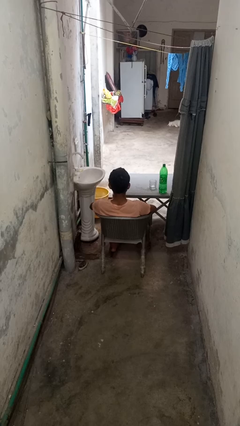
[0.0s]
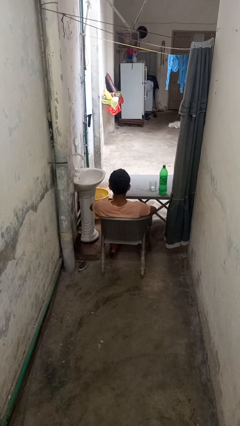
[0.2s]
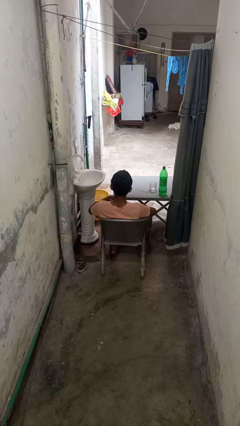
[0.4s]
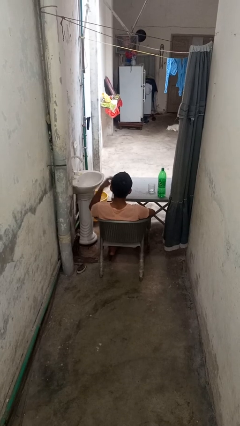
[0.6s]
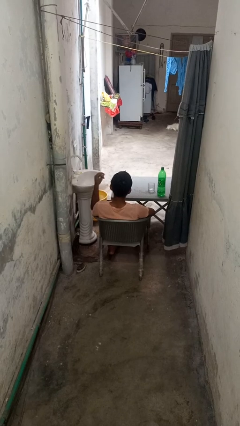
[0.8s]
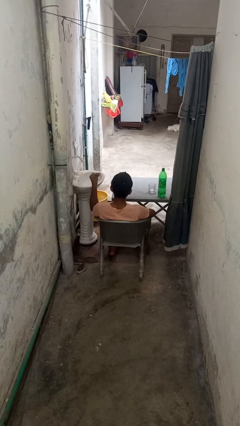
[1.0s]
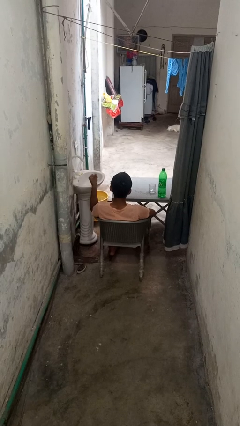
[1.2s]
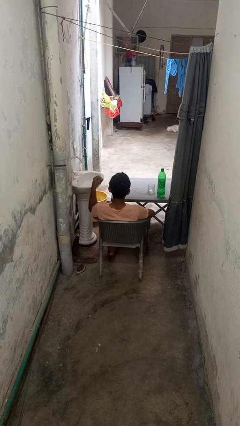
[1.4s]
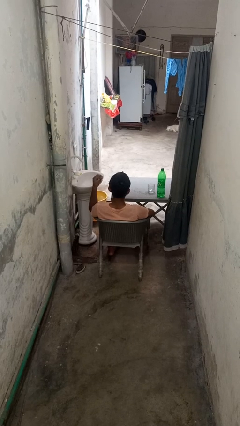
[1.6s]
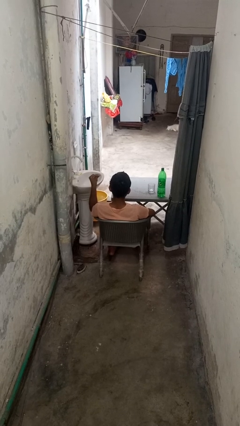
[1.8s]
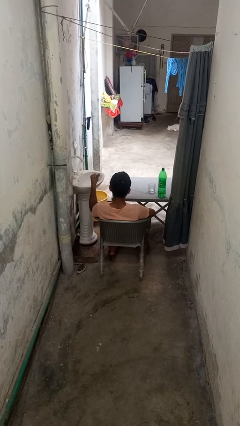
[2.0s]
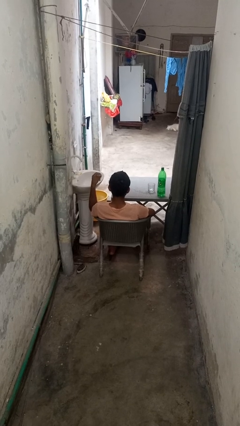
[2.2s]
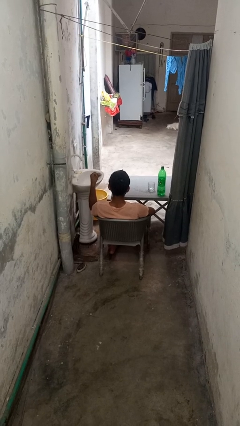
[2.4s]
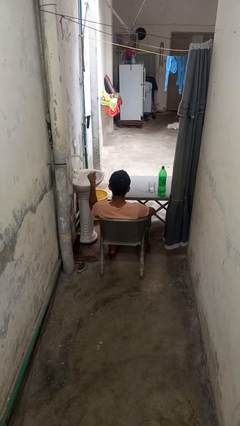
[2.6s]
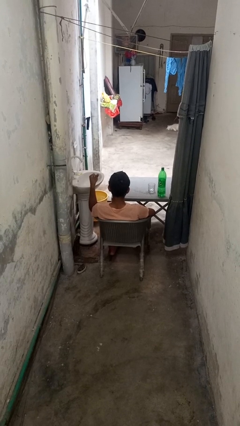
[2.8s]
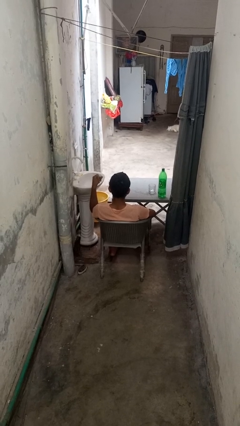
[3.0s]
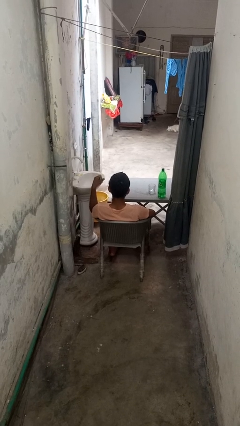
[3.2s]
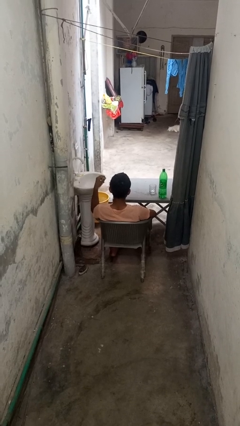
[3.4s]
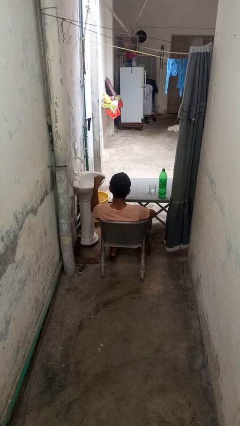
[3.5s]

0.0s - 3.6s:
person snaps fingers

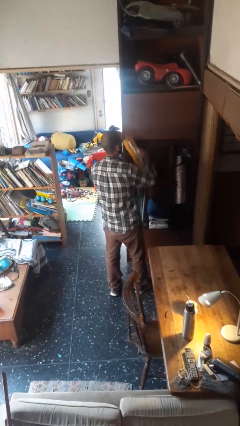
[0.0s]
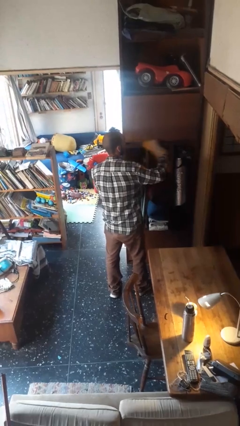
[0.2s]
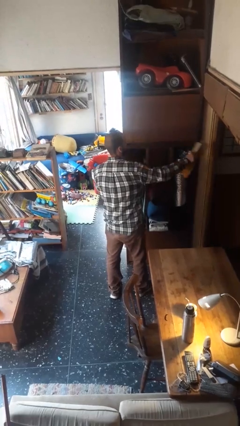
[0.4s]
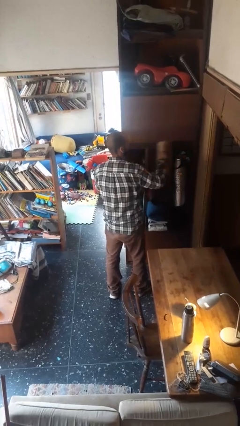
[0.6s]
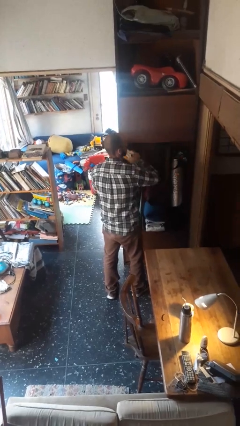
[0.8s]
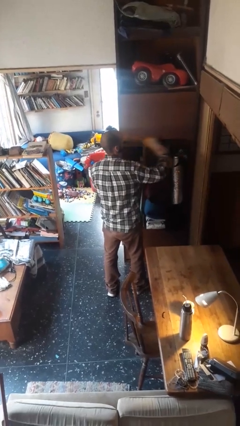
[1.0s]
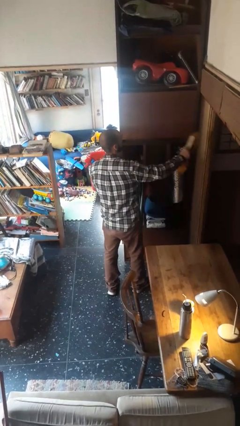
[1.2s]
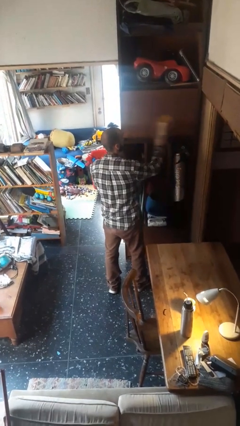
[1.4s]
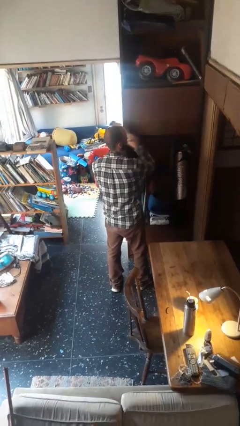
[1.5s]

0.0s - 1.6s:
person dusts furniture

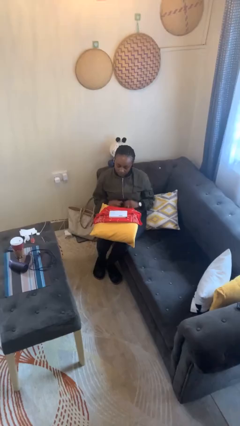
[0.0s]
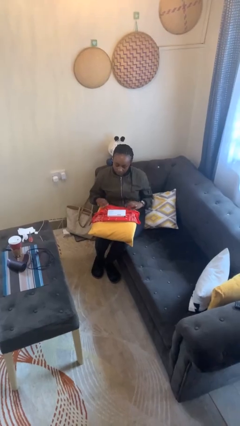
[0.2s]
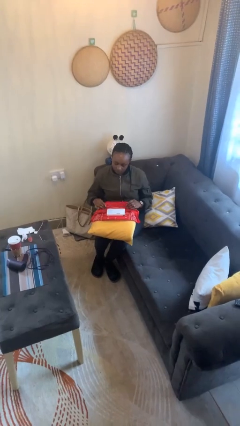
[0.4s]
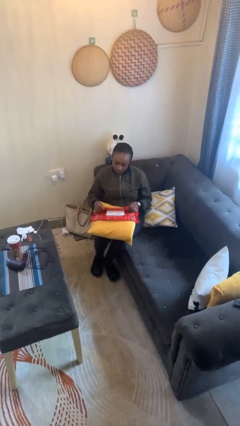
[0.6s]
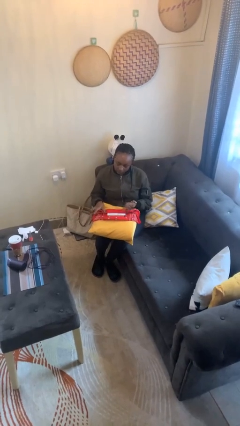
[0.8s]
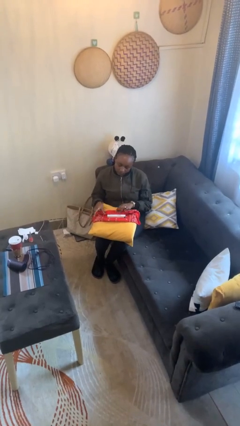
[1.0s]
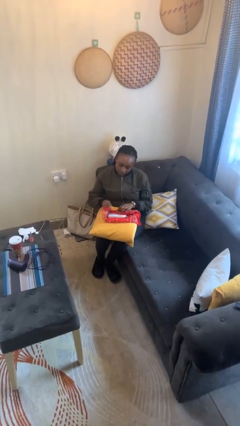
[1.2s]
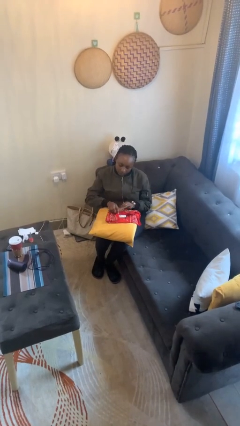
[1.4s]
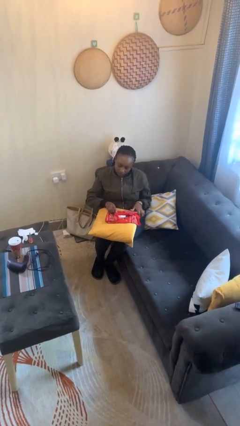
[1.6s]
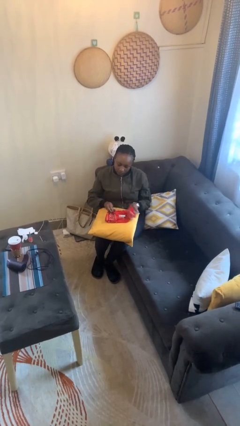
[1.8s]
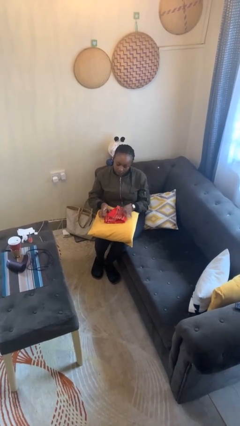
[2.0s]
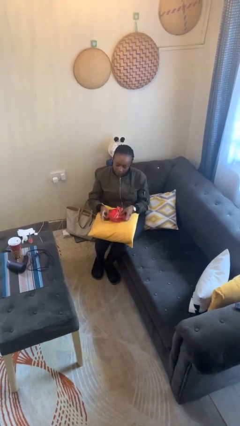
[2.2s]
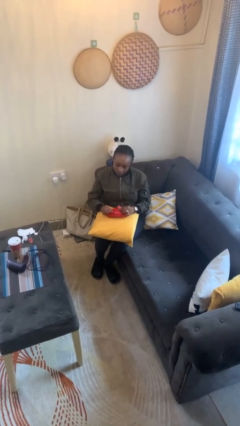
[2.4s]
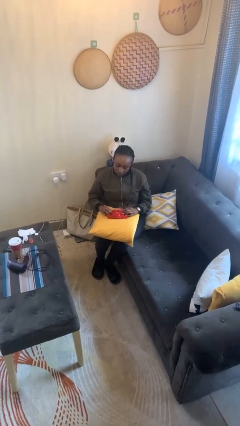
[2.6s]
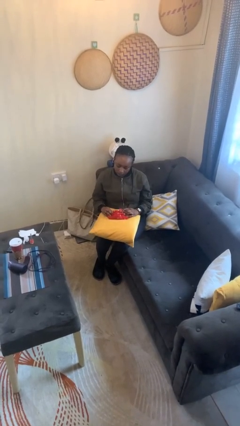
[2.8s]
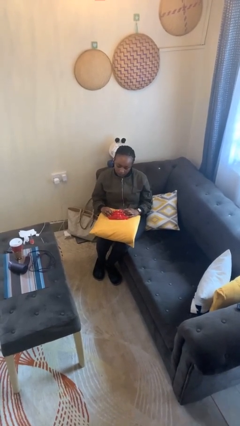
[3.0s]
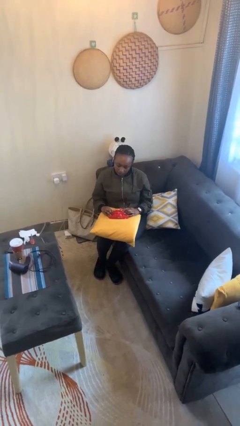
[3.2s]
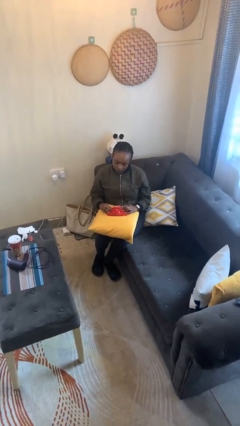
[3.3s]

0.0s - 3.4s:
person wraps box

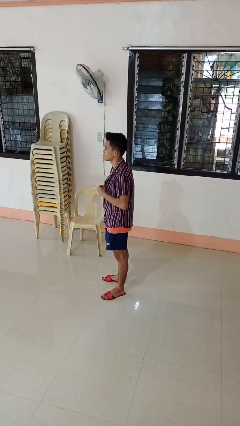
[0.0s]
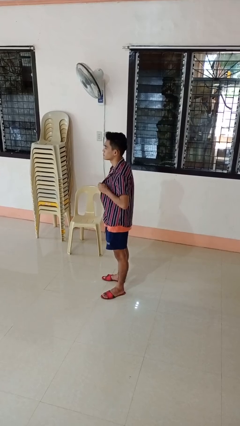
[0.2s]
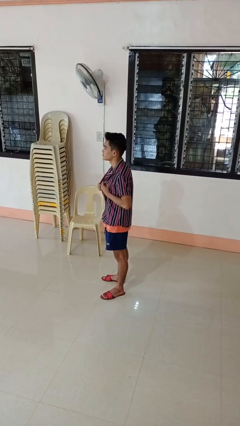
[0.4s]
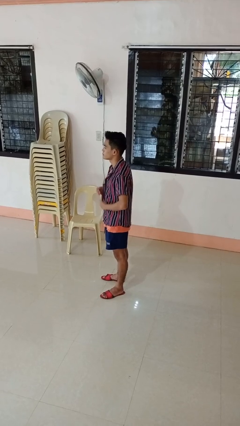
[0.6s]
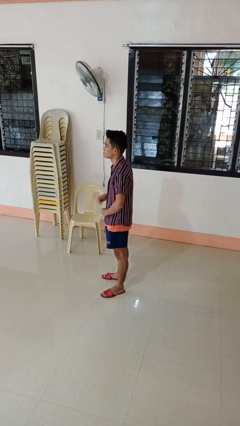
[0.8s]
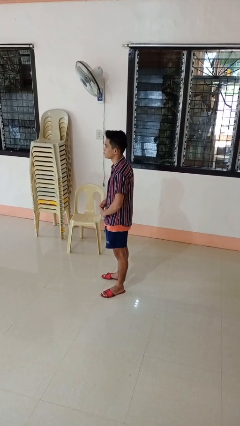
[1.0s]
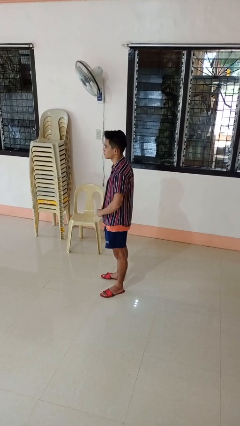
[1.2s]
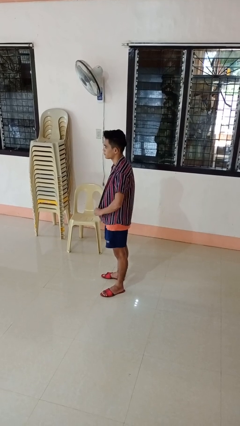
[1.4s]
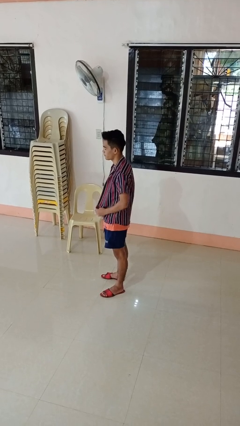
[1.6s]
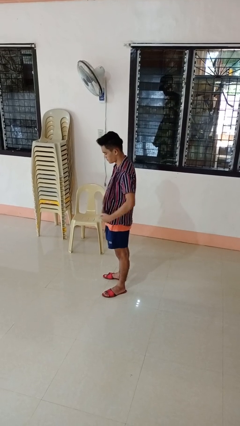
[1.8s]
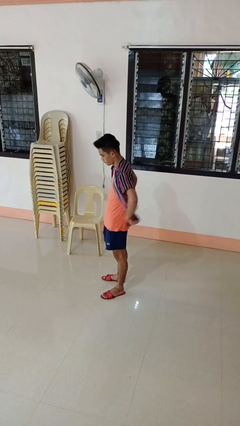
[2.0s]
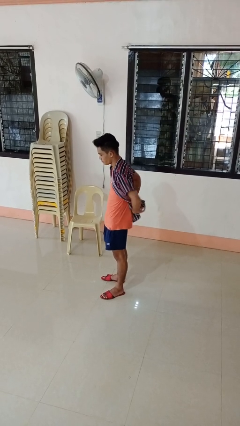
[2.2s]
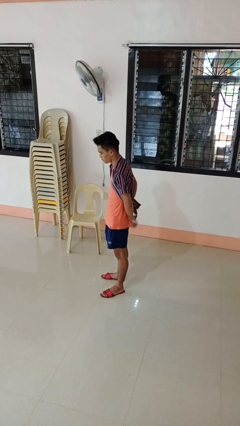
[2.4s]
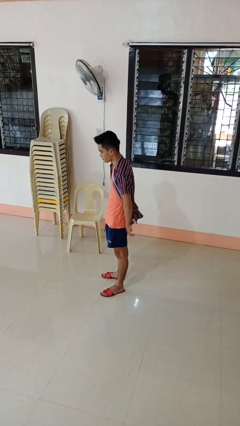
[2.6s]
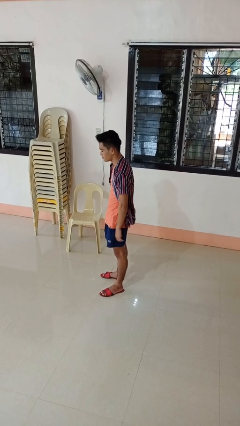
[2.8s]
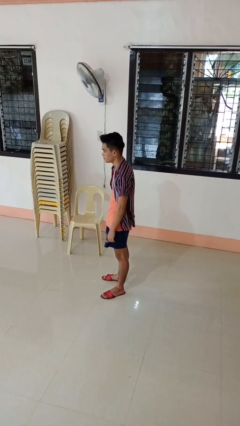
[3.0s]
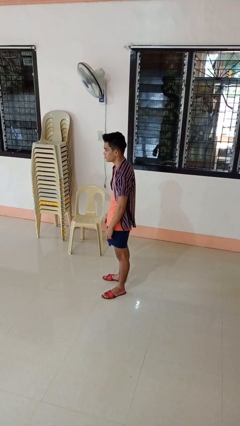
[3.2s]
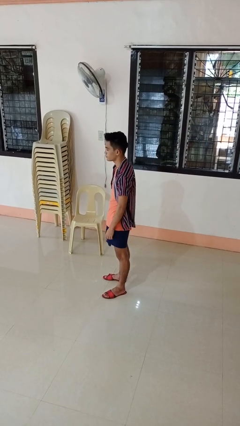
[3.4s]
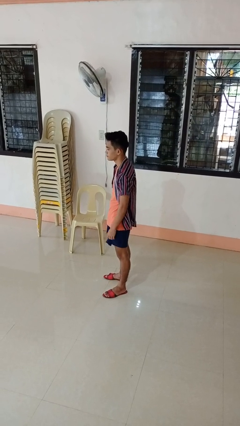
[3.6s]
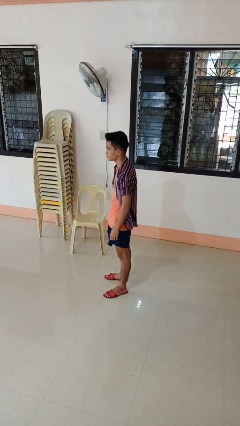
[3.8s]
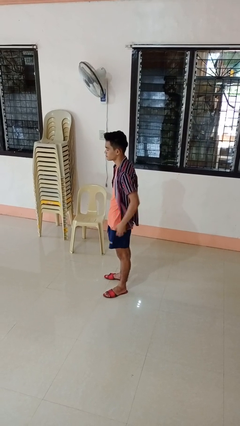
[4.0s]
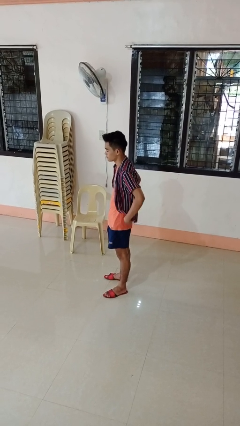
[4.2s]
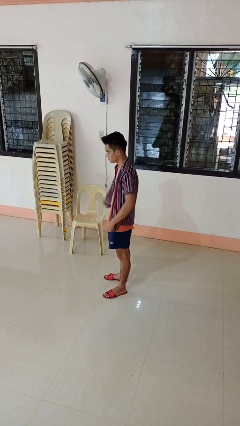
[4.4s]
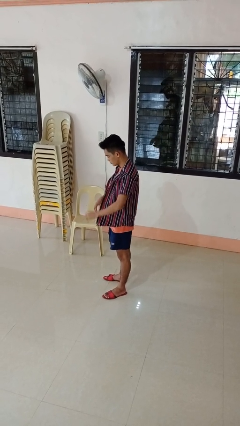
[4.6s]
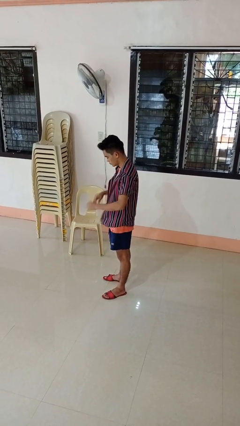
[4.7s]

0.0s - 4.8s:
person unbuttons shirt

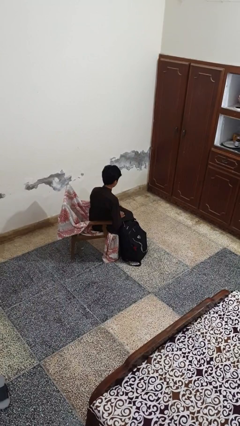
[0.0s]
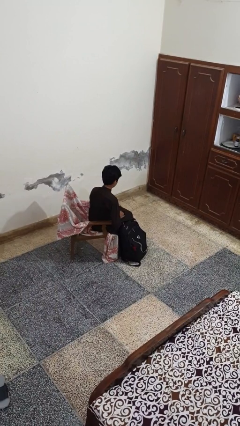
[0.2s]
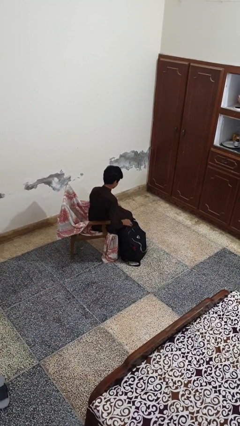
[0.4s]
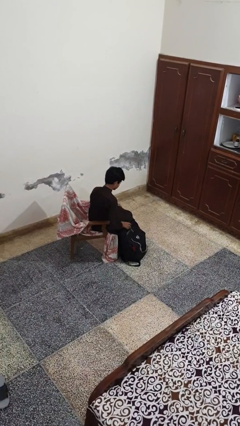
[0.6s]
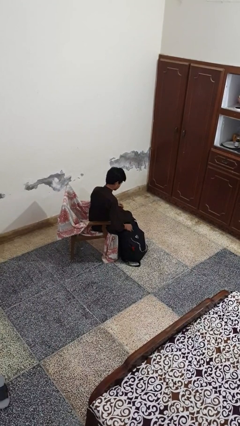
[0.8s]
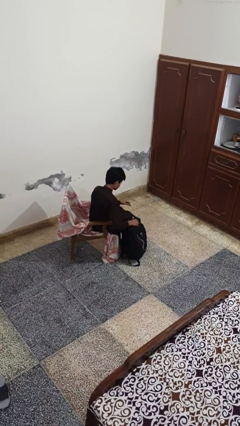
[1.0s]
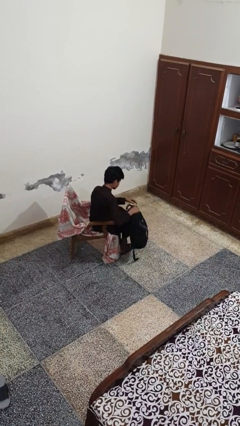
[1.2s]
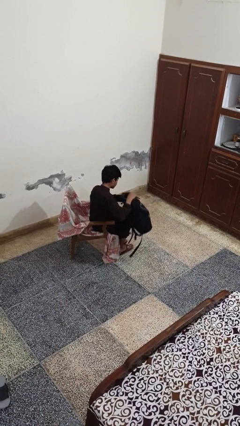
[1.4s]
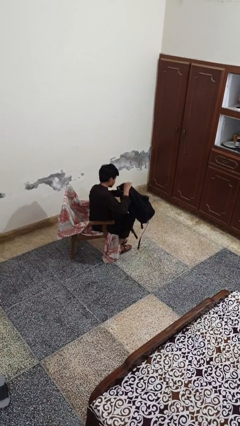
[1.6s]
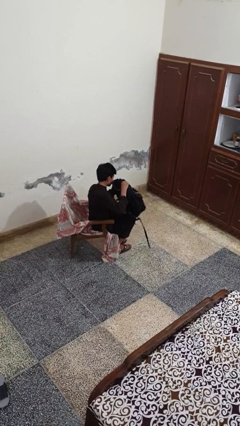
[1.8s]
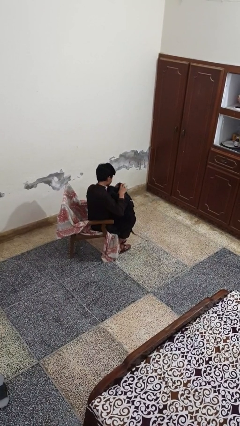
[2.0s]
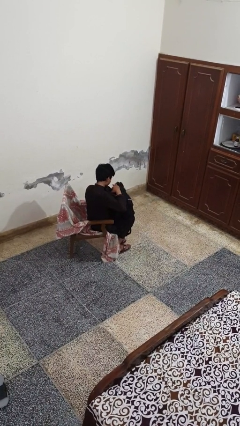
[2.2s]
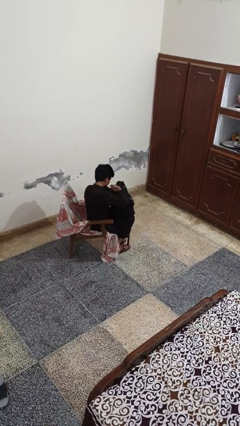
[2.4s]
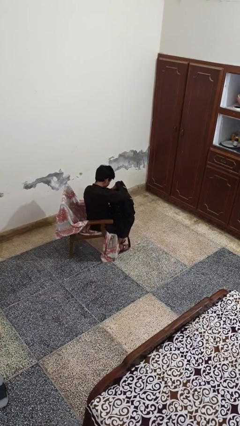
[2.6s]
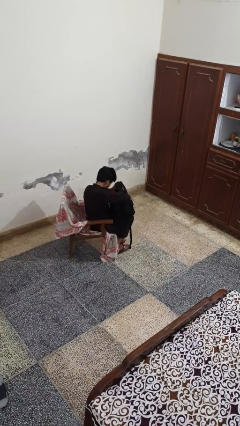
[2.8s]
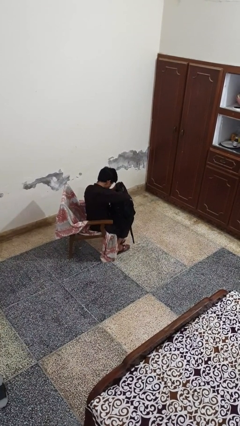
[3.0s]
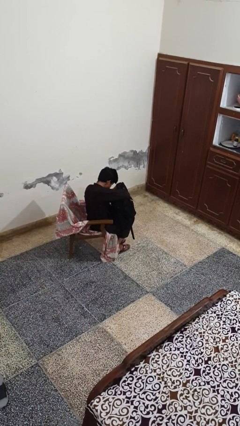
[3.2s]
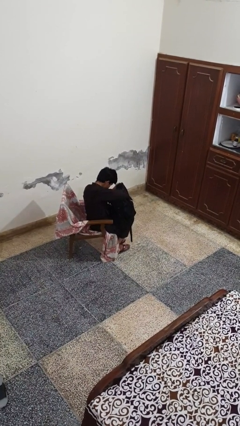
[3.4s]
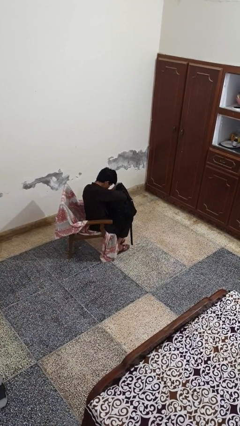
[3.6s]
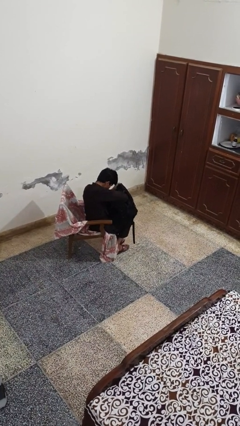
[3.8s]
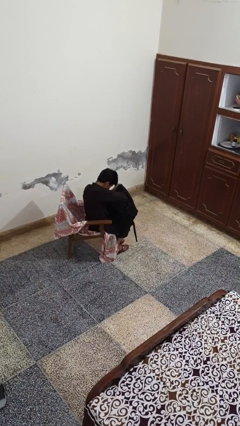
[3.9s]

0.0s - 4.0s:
person searches in backpack

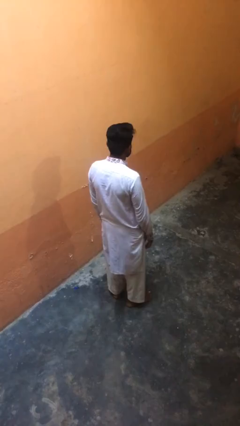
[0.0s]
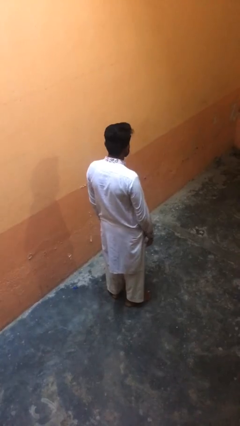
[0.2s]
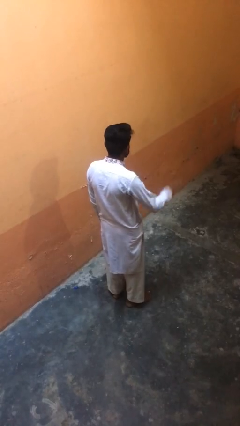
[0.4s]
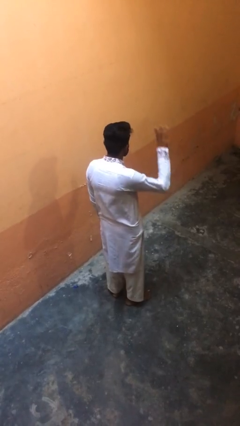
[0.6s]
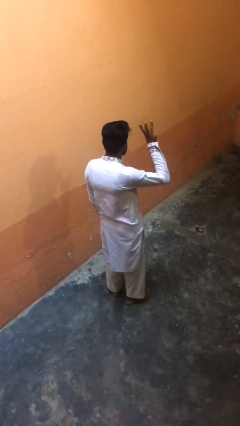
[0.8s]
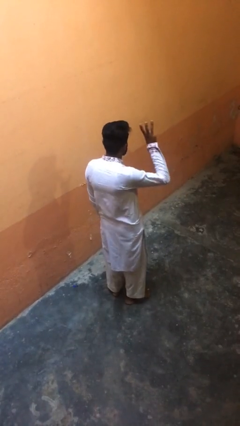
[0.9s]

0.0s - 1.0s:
person gestures number three
